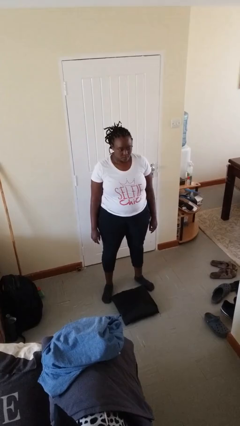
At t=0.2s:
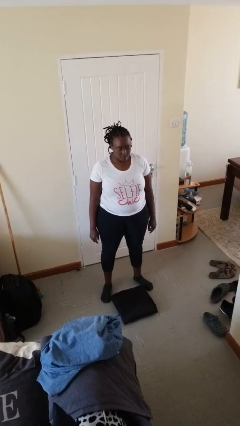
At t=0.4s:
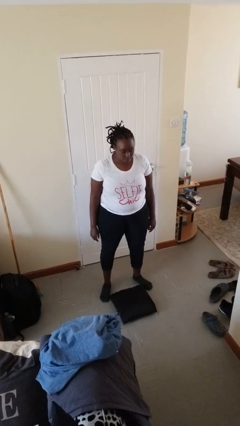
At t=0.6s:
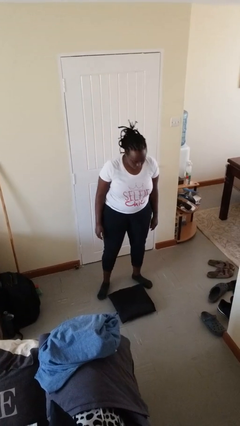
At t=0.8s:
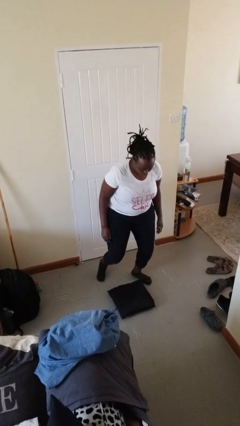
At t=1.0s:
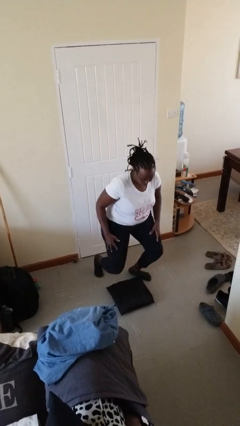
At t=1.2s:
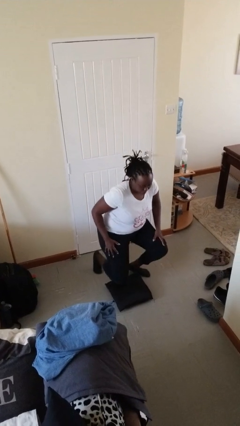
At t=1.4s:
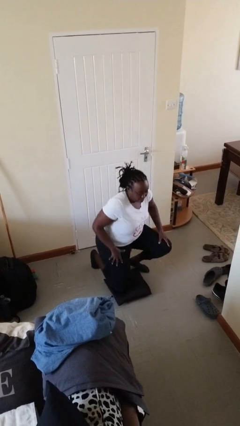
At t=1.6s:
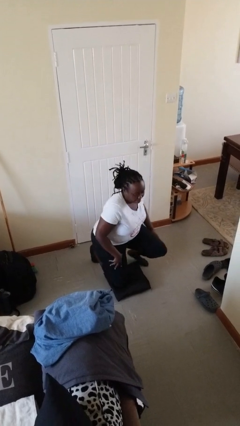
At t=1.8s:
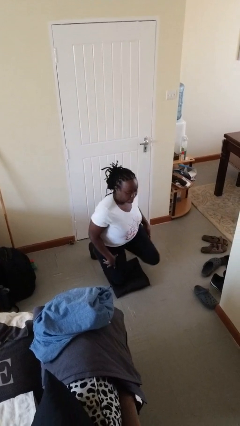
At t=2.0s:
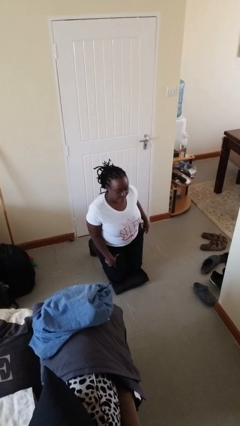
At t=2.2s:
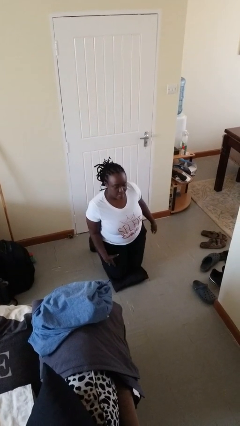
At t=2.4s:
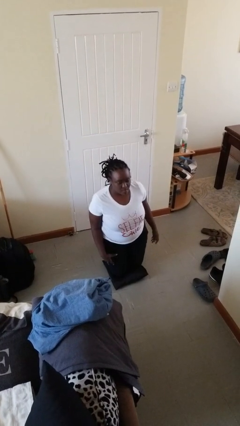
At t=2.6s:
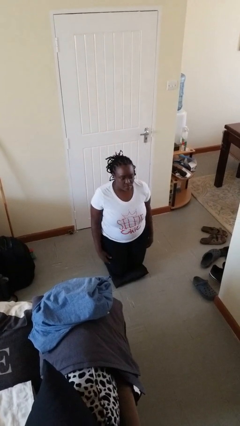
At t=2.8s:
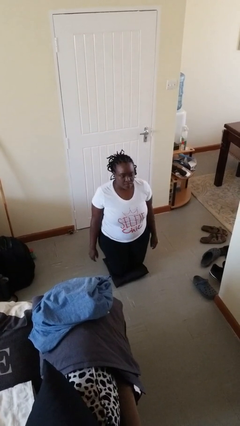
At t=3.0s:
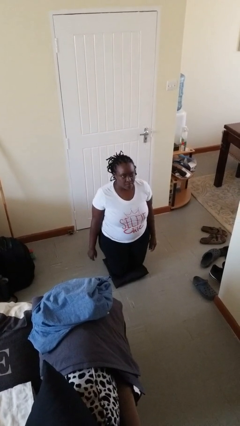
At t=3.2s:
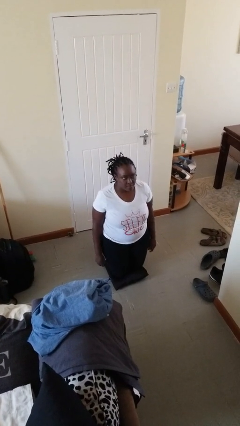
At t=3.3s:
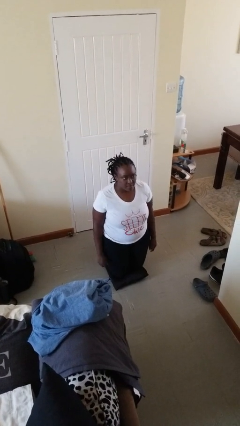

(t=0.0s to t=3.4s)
person kneels

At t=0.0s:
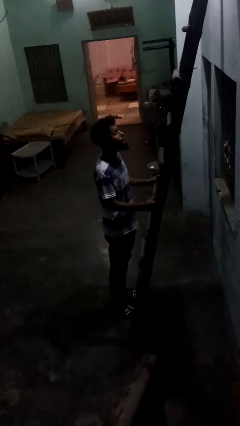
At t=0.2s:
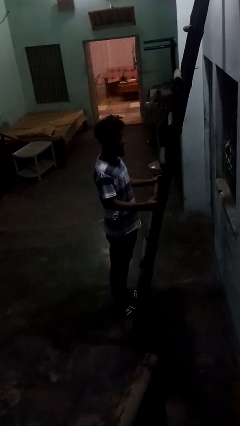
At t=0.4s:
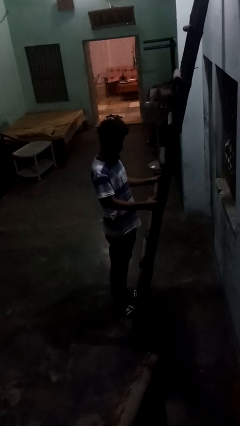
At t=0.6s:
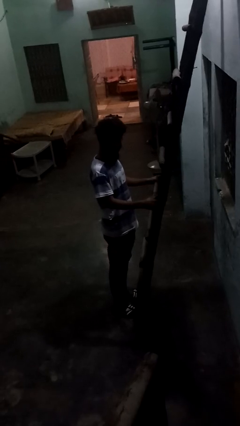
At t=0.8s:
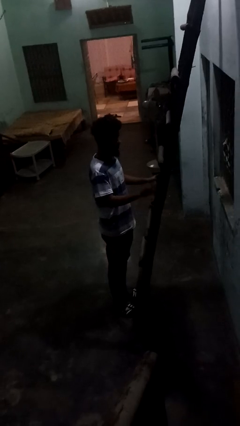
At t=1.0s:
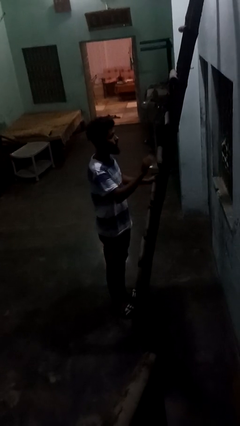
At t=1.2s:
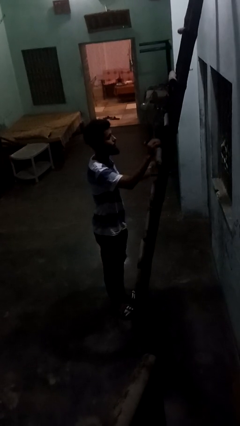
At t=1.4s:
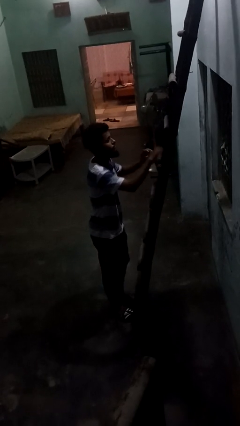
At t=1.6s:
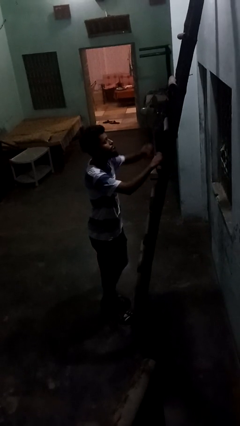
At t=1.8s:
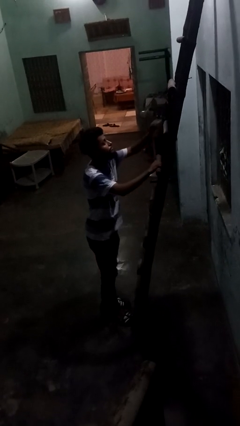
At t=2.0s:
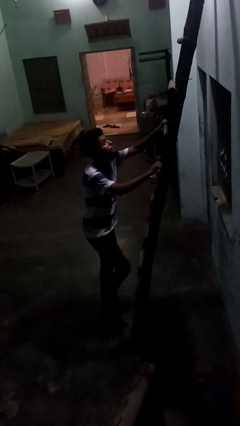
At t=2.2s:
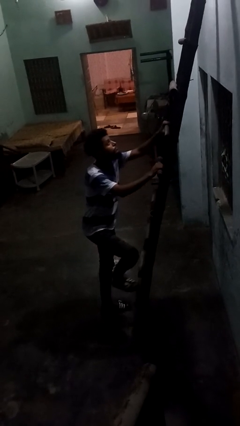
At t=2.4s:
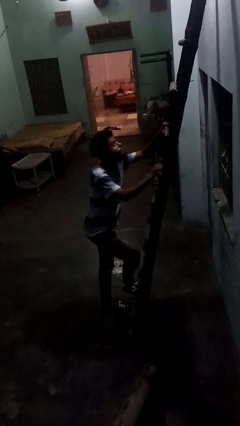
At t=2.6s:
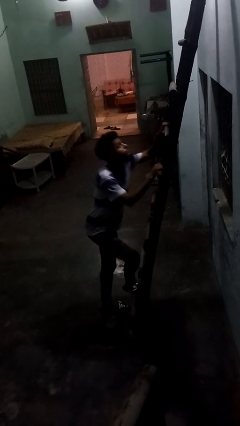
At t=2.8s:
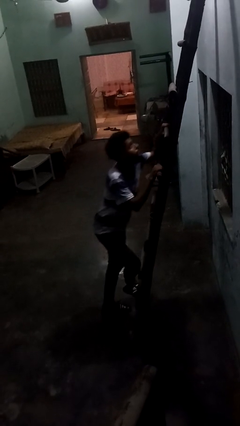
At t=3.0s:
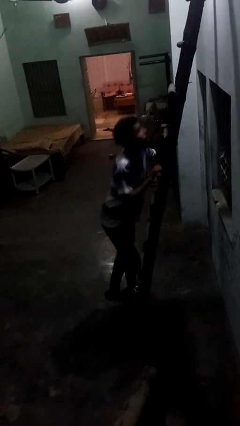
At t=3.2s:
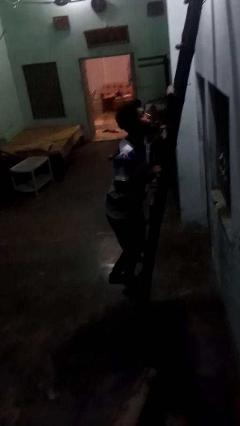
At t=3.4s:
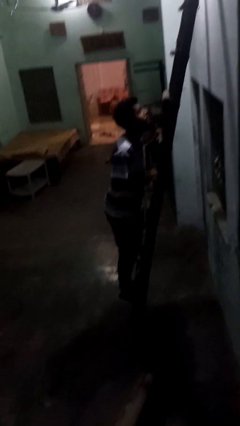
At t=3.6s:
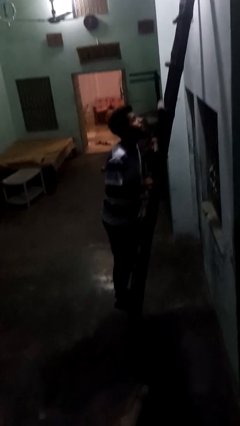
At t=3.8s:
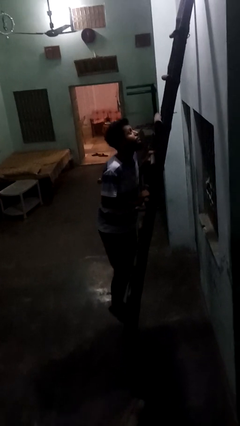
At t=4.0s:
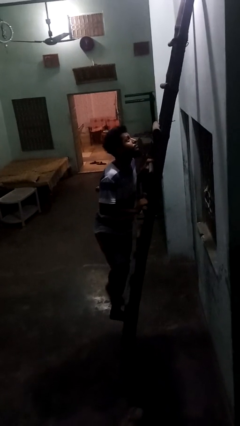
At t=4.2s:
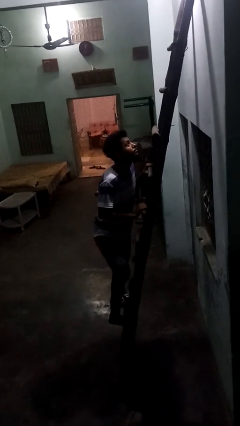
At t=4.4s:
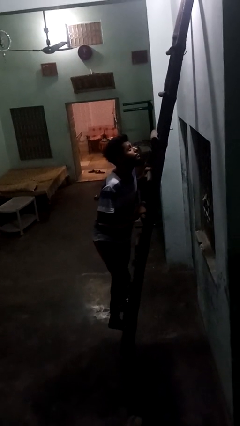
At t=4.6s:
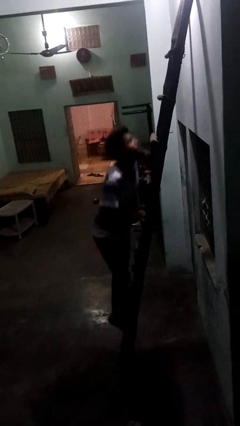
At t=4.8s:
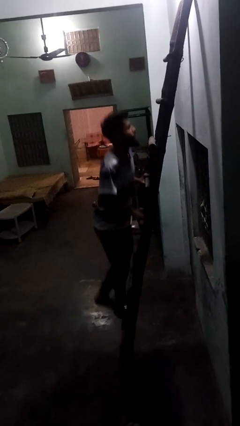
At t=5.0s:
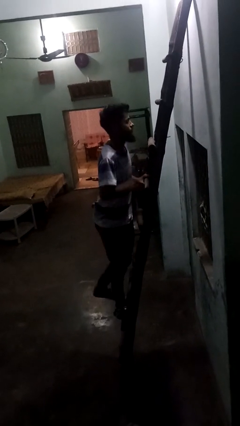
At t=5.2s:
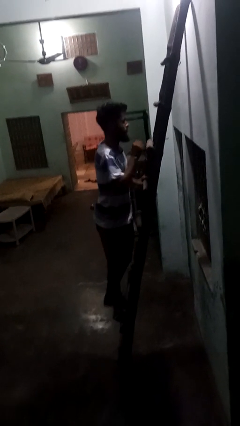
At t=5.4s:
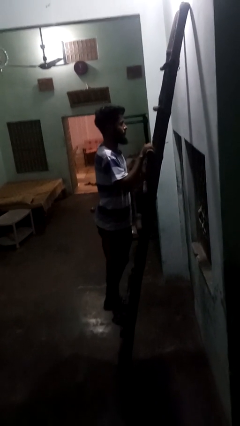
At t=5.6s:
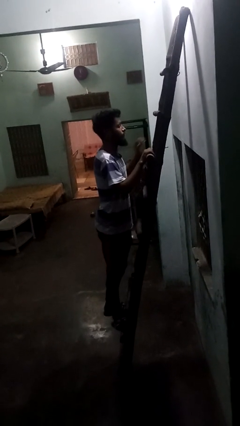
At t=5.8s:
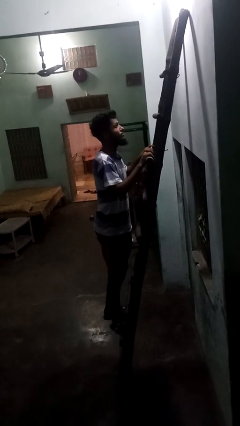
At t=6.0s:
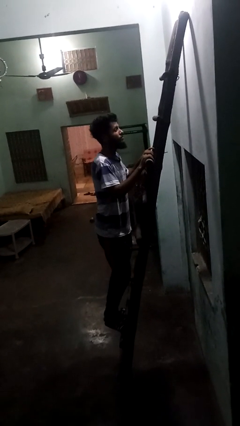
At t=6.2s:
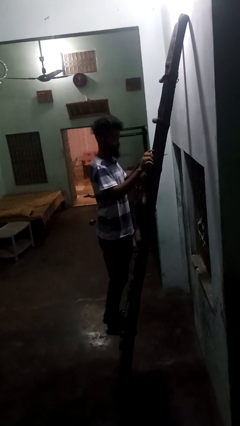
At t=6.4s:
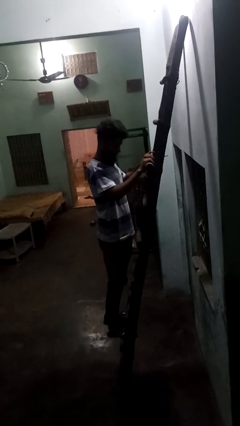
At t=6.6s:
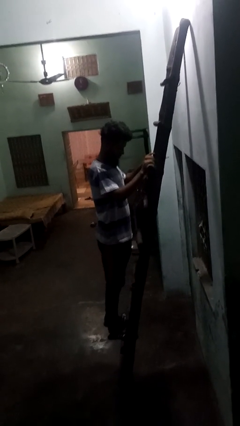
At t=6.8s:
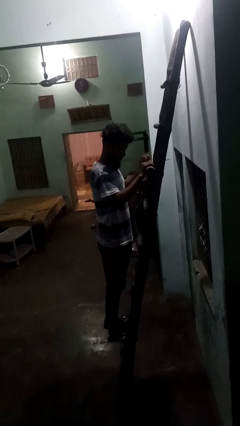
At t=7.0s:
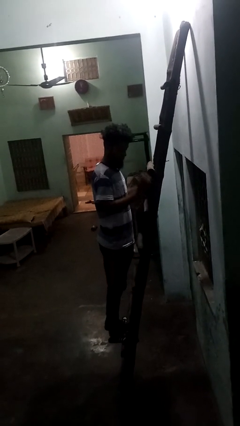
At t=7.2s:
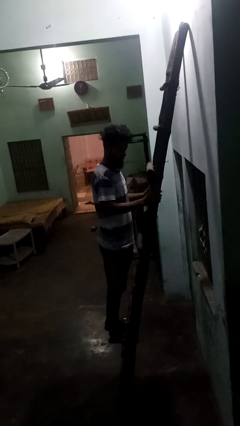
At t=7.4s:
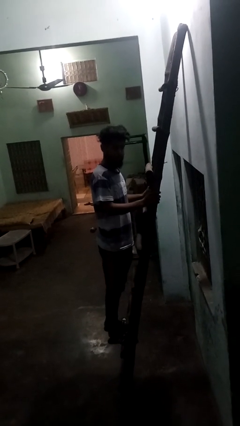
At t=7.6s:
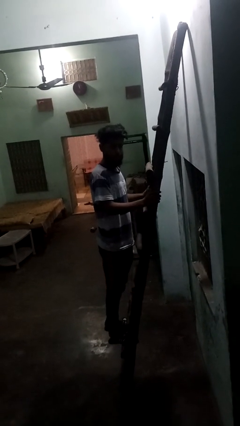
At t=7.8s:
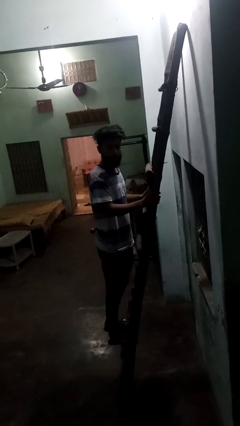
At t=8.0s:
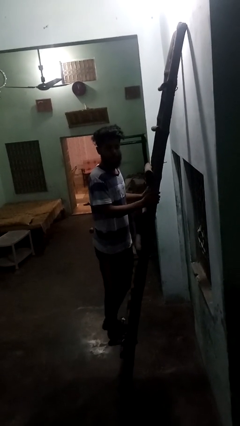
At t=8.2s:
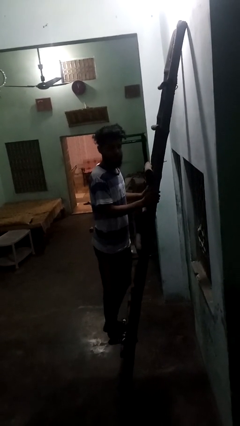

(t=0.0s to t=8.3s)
person climbs up ladder

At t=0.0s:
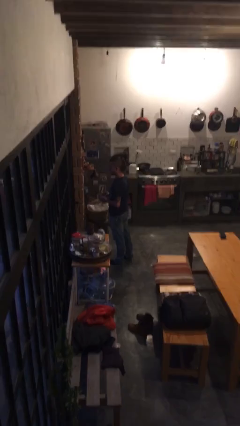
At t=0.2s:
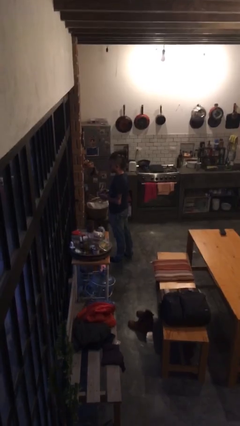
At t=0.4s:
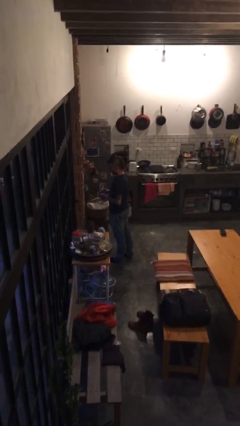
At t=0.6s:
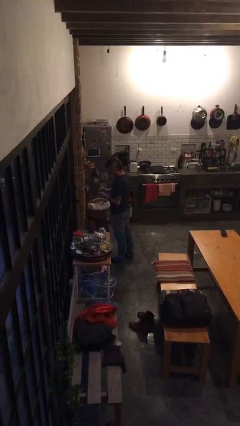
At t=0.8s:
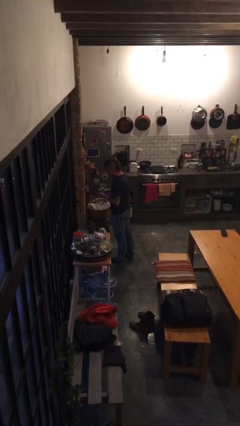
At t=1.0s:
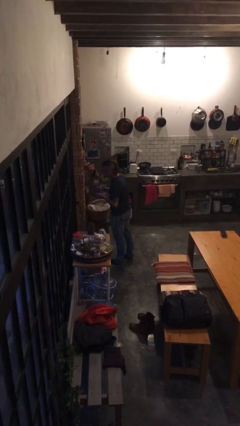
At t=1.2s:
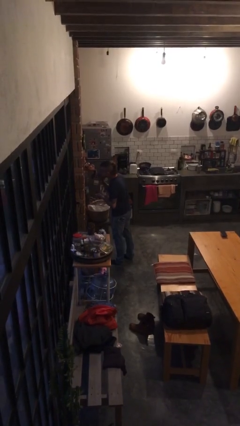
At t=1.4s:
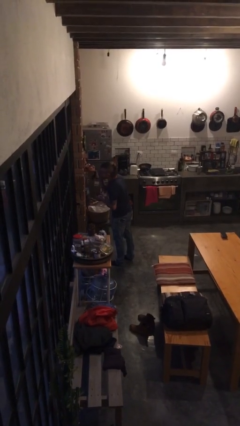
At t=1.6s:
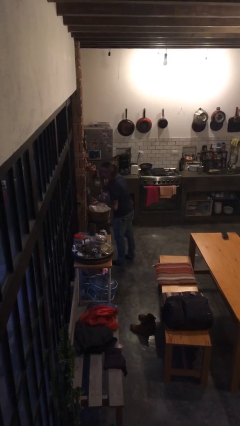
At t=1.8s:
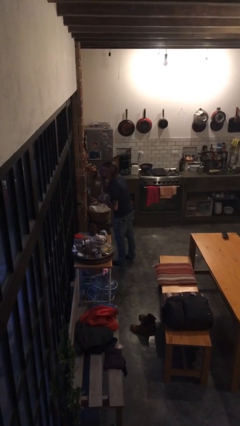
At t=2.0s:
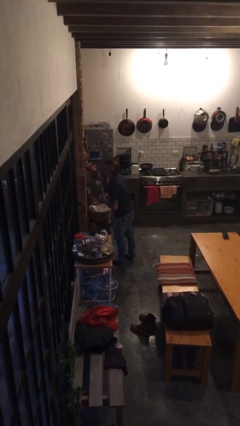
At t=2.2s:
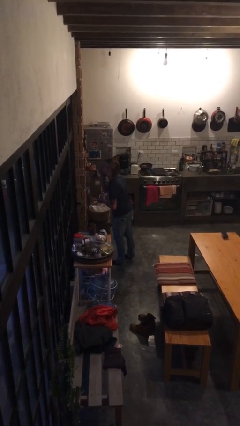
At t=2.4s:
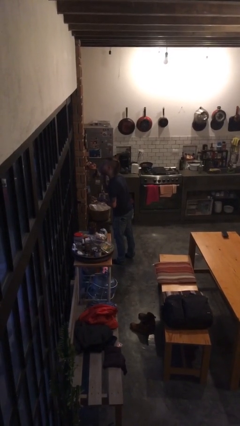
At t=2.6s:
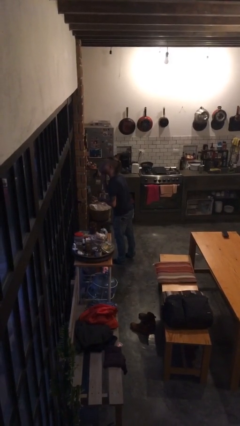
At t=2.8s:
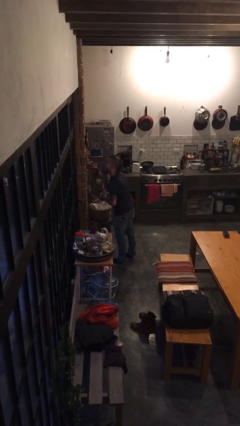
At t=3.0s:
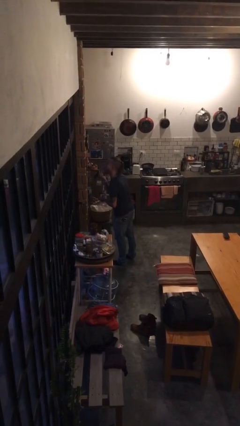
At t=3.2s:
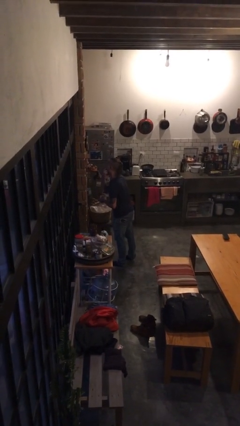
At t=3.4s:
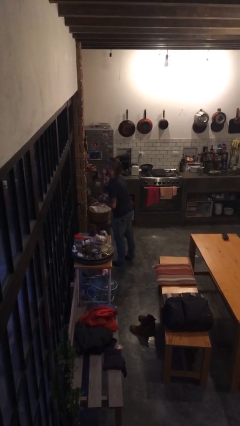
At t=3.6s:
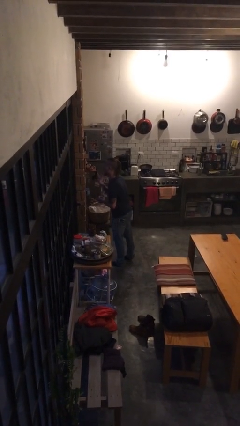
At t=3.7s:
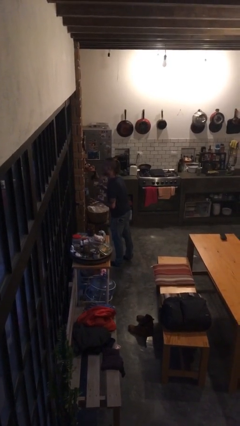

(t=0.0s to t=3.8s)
person applies foundation makeup

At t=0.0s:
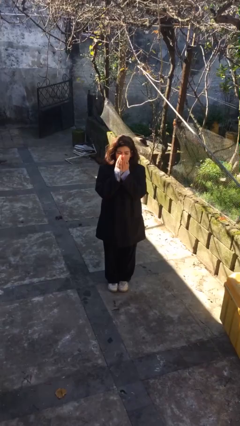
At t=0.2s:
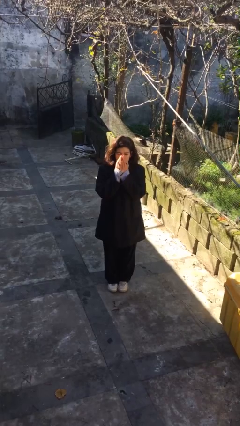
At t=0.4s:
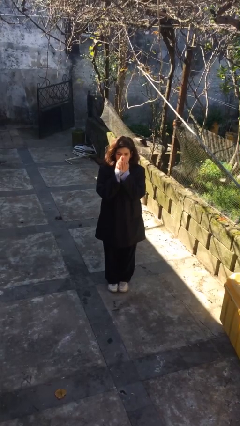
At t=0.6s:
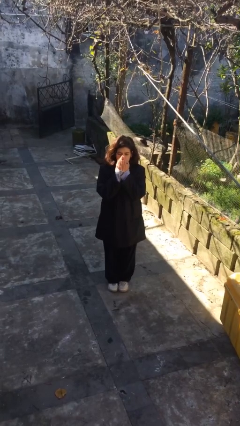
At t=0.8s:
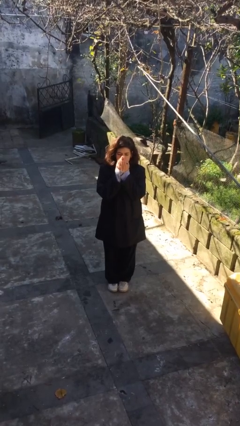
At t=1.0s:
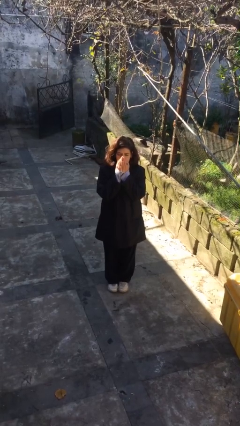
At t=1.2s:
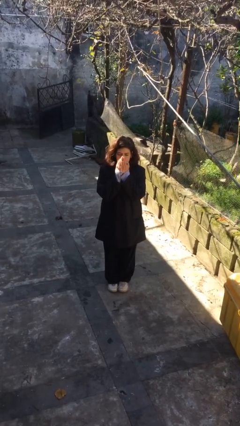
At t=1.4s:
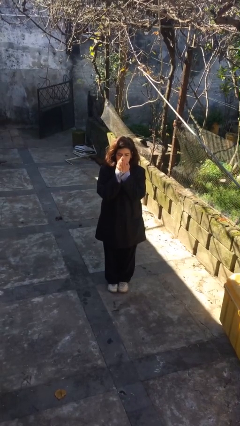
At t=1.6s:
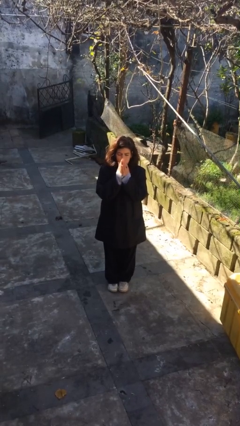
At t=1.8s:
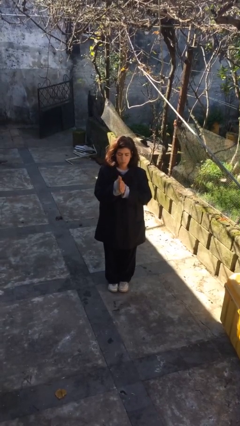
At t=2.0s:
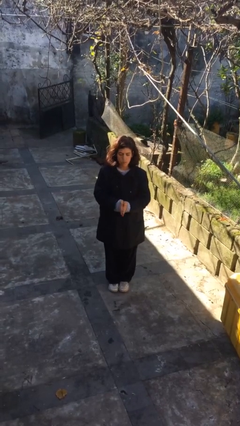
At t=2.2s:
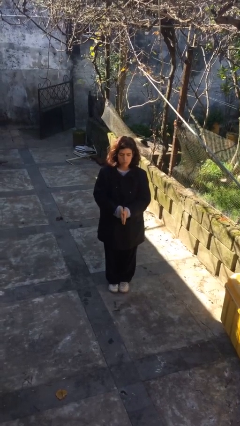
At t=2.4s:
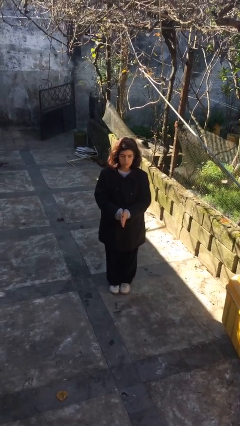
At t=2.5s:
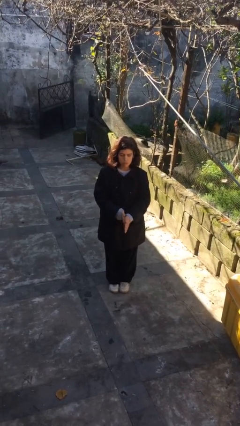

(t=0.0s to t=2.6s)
person blows into hands
